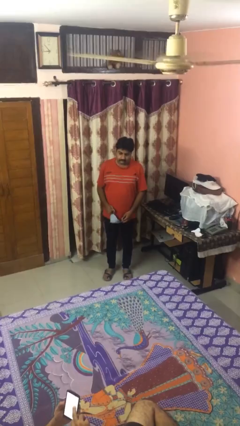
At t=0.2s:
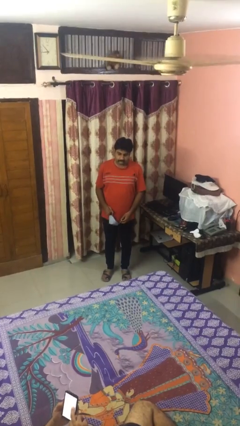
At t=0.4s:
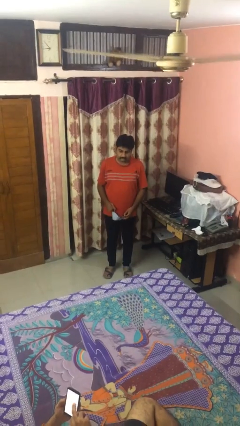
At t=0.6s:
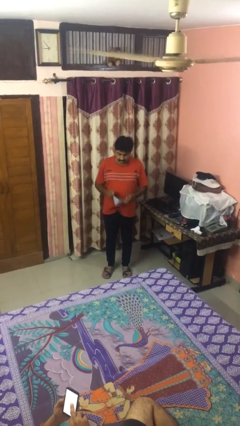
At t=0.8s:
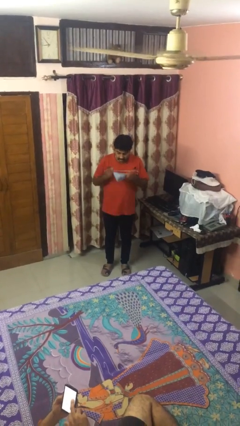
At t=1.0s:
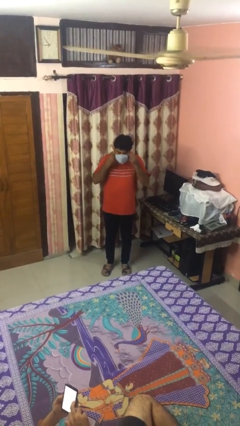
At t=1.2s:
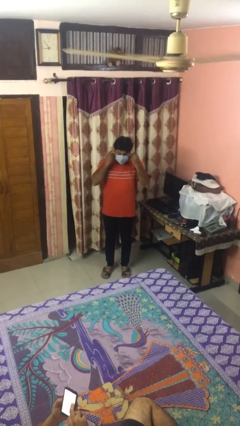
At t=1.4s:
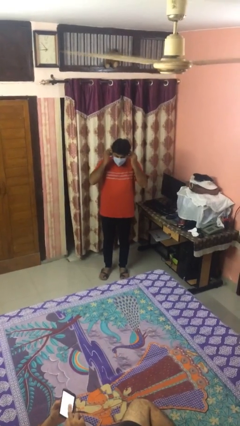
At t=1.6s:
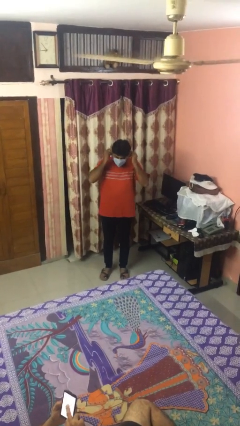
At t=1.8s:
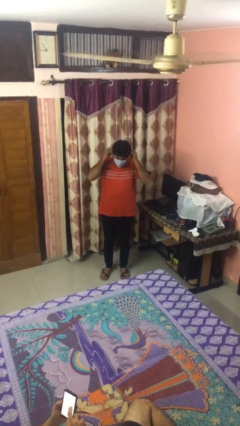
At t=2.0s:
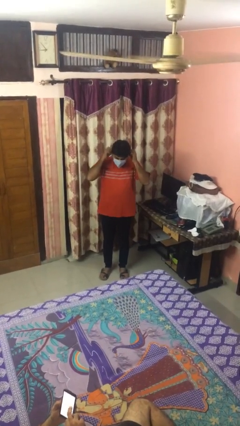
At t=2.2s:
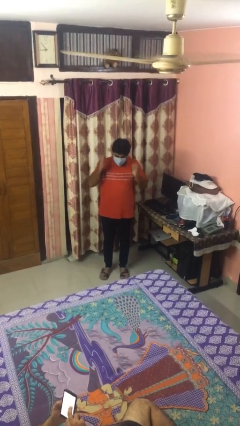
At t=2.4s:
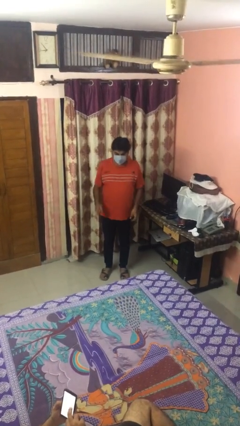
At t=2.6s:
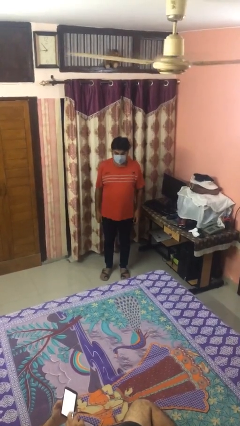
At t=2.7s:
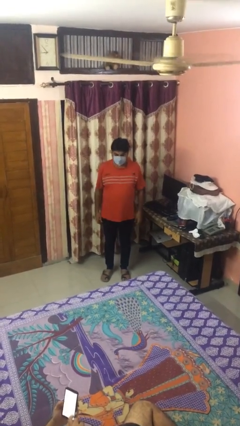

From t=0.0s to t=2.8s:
person puts on facemask

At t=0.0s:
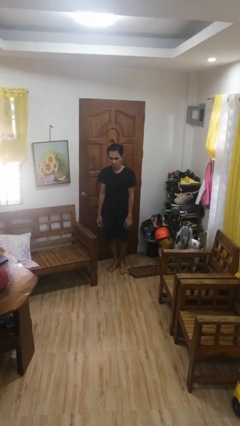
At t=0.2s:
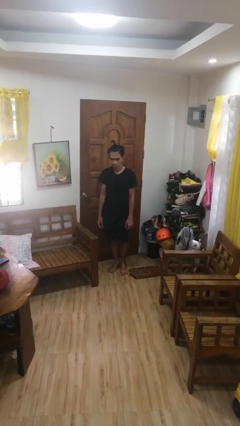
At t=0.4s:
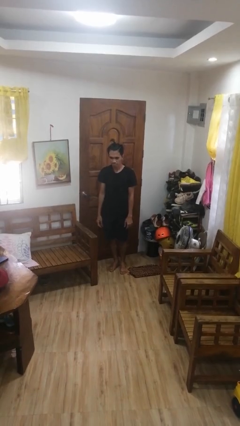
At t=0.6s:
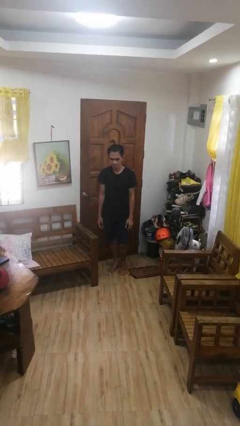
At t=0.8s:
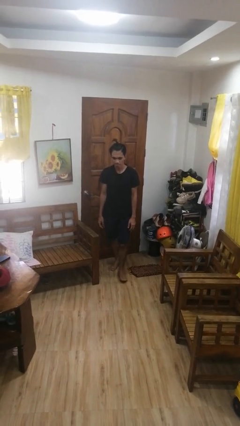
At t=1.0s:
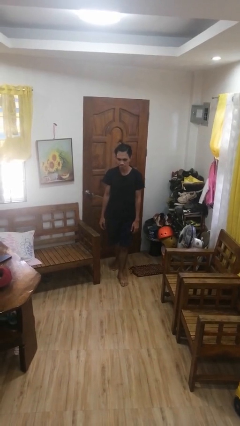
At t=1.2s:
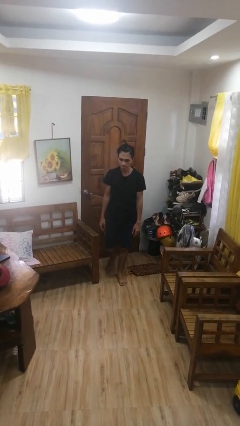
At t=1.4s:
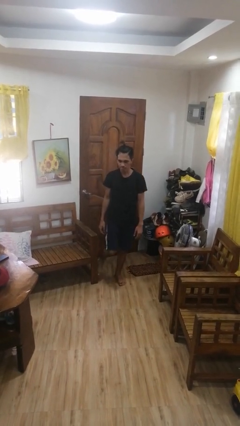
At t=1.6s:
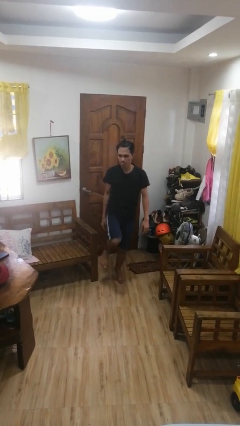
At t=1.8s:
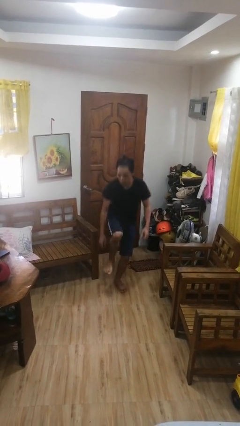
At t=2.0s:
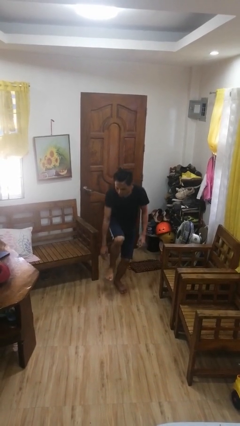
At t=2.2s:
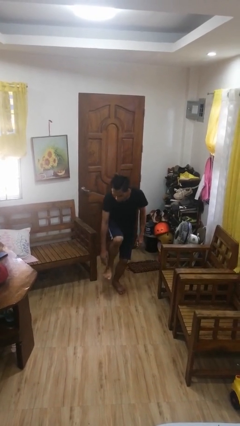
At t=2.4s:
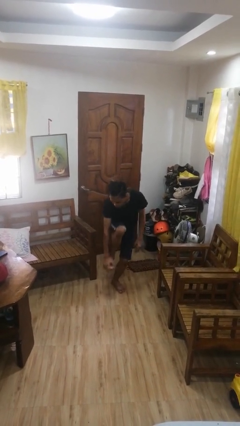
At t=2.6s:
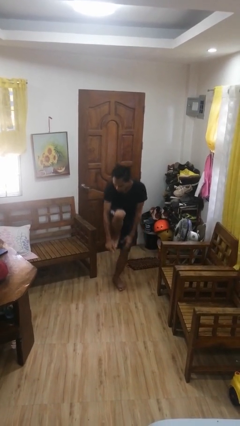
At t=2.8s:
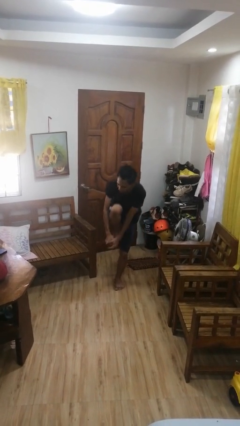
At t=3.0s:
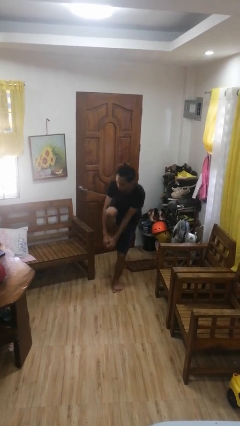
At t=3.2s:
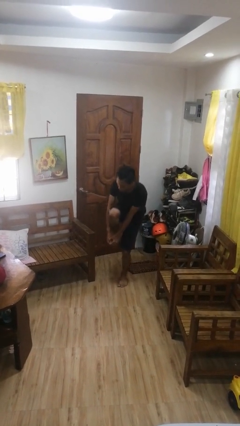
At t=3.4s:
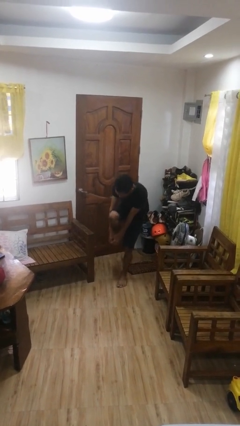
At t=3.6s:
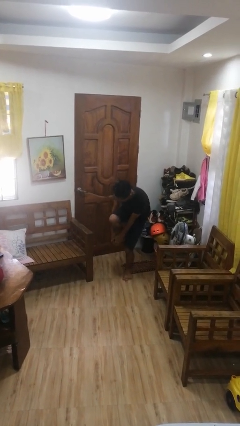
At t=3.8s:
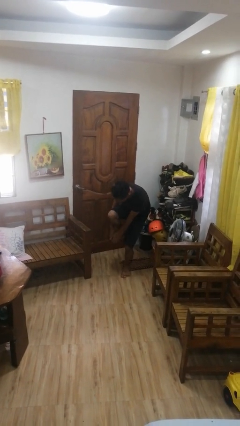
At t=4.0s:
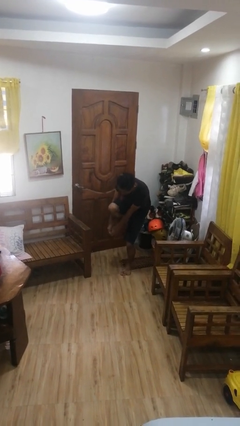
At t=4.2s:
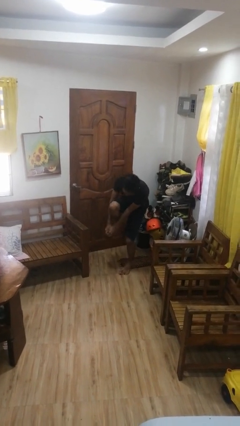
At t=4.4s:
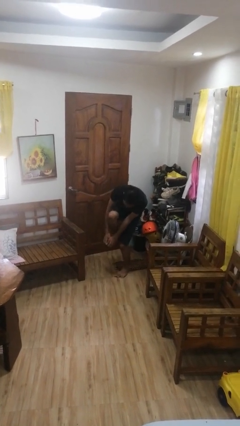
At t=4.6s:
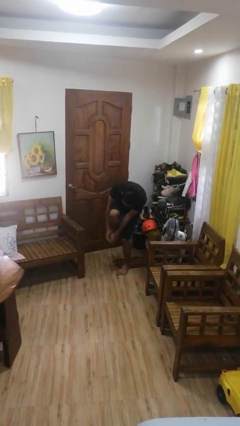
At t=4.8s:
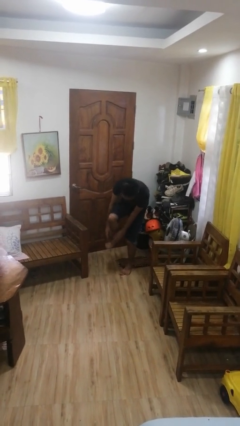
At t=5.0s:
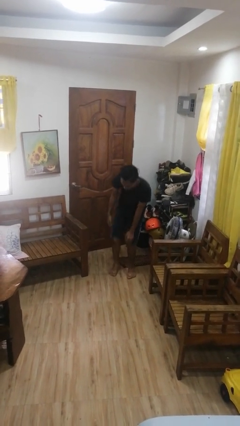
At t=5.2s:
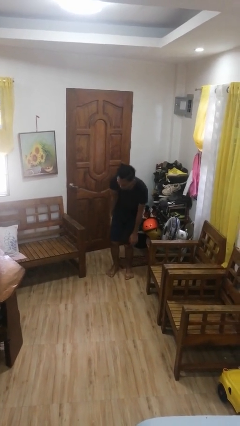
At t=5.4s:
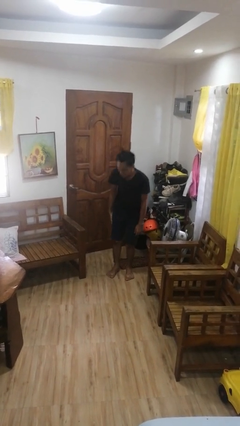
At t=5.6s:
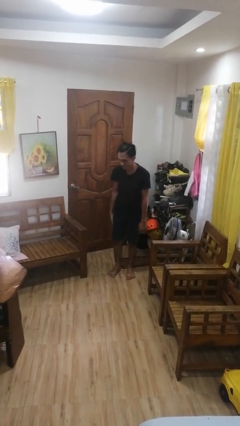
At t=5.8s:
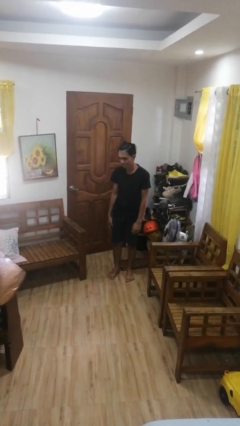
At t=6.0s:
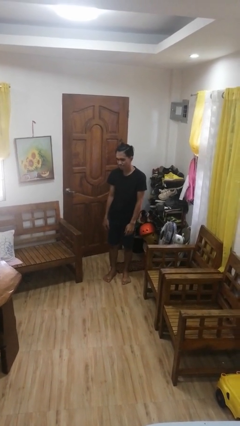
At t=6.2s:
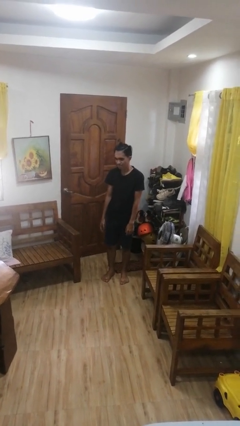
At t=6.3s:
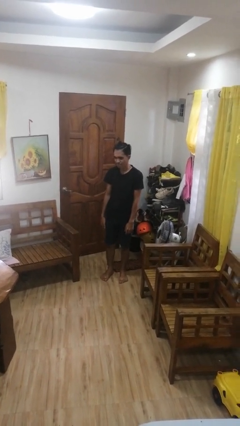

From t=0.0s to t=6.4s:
person stubs toe

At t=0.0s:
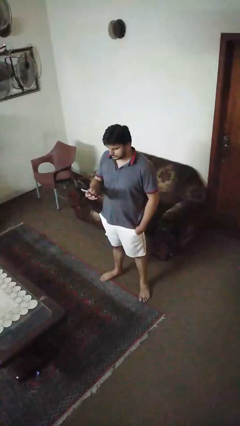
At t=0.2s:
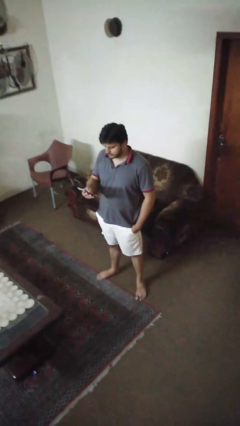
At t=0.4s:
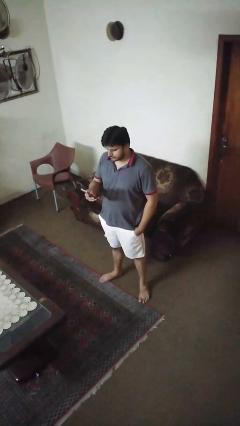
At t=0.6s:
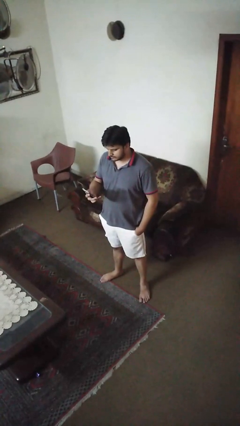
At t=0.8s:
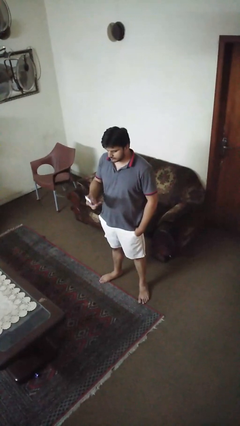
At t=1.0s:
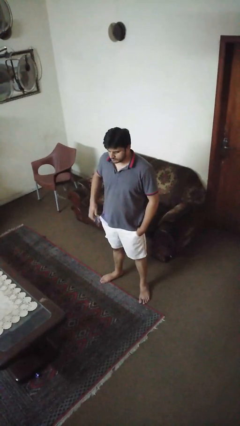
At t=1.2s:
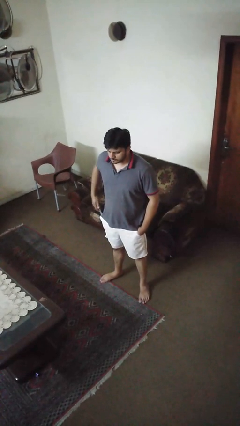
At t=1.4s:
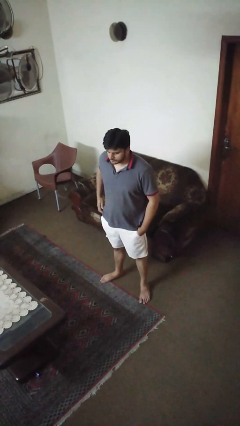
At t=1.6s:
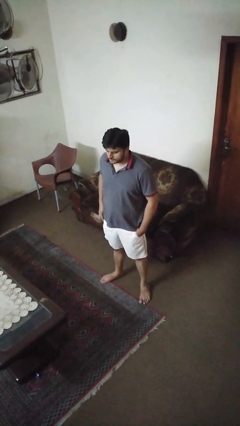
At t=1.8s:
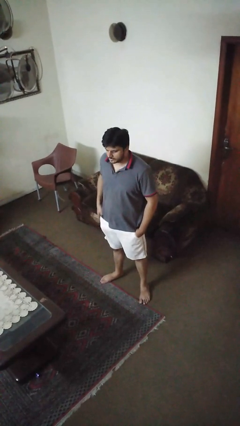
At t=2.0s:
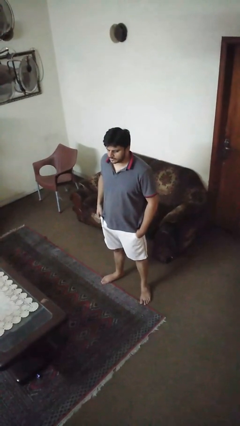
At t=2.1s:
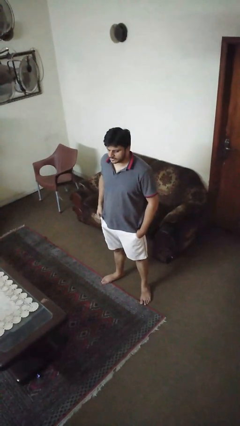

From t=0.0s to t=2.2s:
person puts phone into pocket

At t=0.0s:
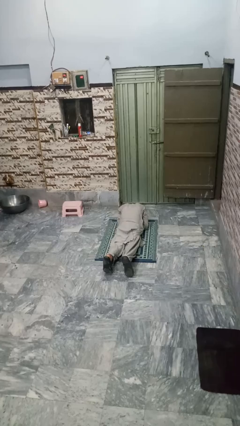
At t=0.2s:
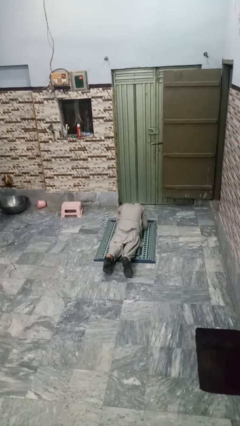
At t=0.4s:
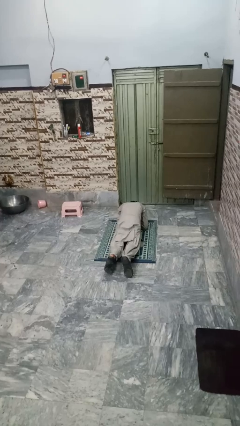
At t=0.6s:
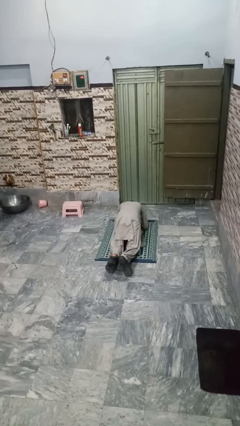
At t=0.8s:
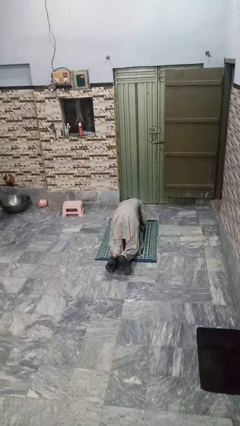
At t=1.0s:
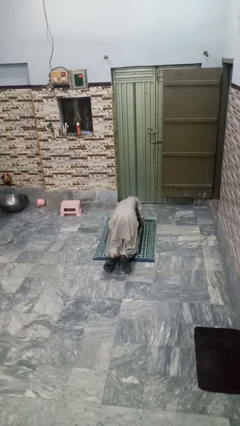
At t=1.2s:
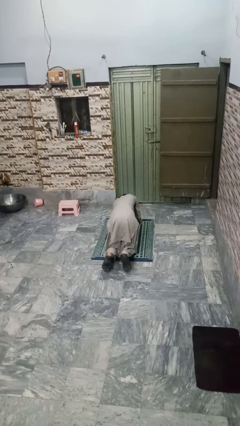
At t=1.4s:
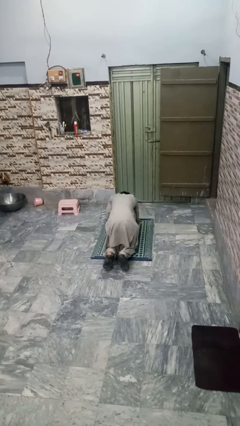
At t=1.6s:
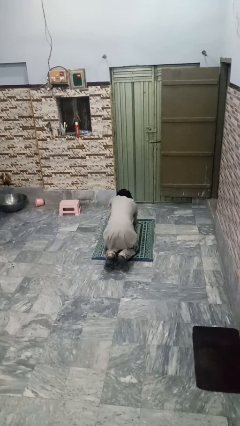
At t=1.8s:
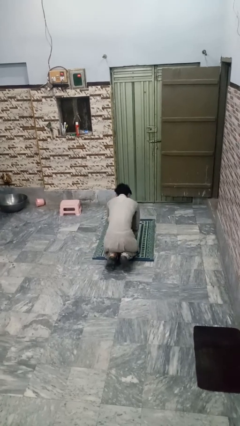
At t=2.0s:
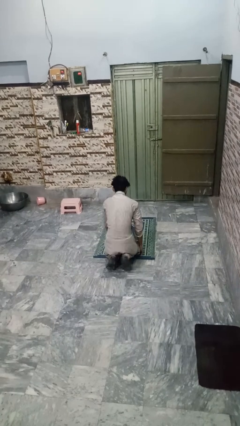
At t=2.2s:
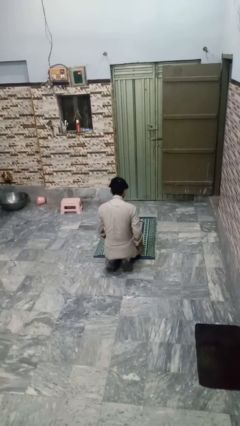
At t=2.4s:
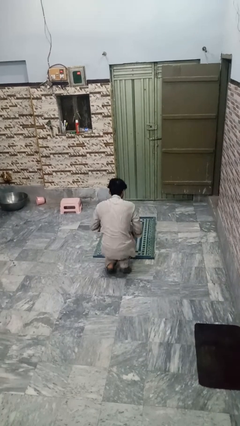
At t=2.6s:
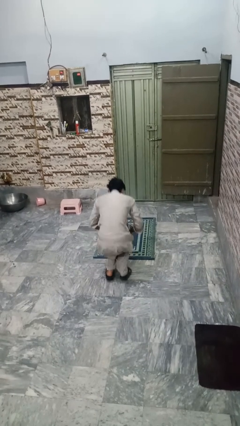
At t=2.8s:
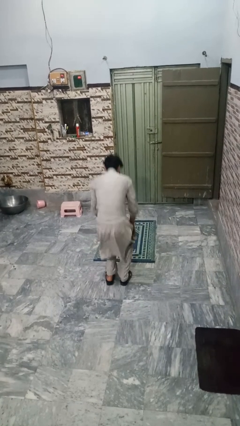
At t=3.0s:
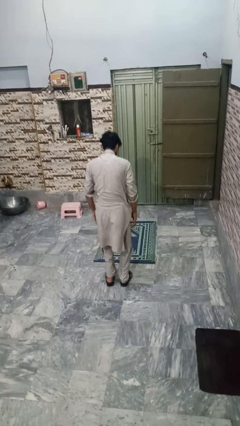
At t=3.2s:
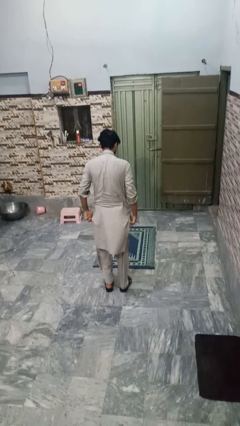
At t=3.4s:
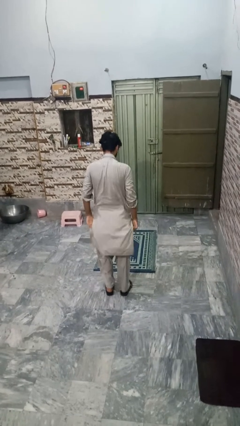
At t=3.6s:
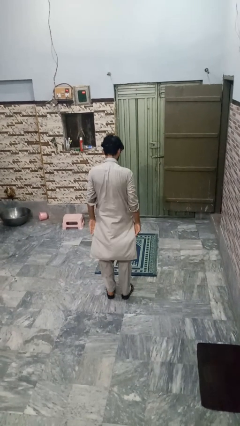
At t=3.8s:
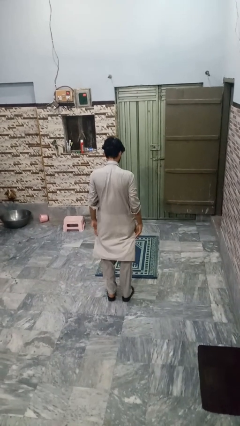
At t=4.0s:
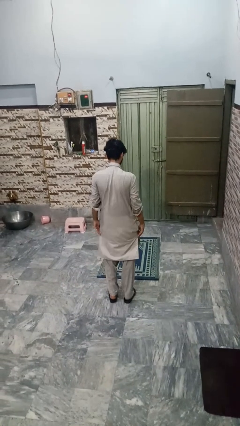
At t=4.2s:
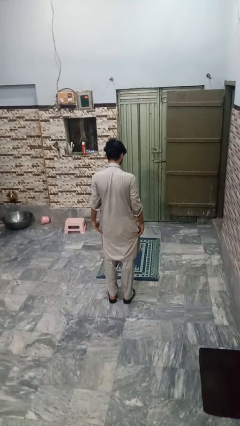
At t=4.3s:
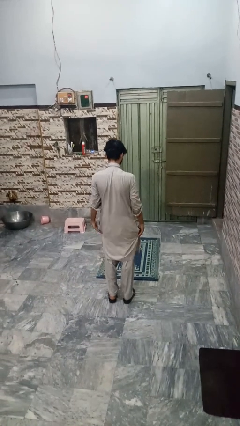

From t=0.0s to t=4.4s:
person stands up from floor

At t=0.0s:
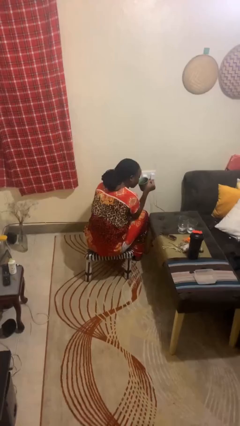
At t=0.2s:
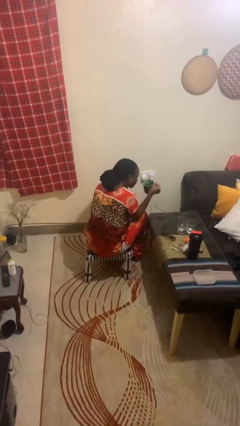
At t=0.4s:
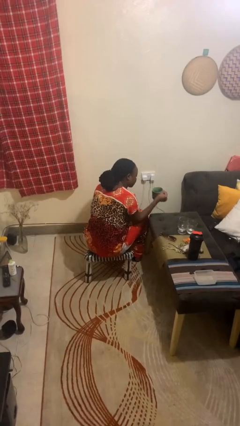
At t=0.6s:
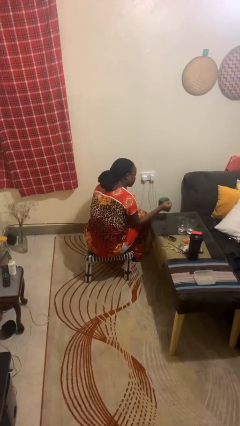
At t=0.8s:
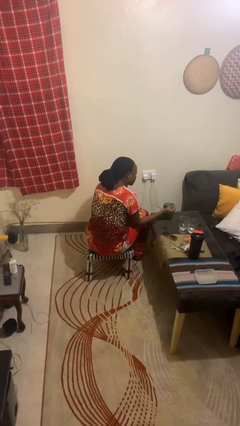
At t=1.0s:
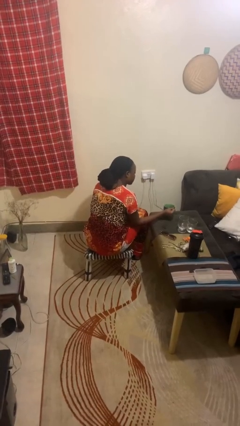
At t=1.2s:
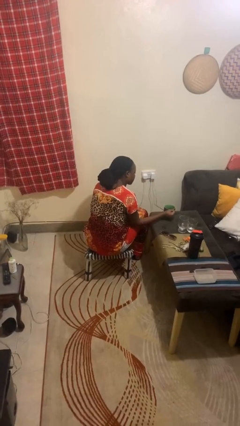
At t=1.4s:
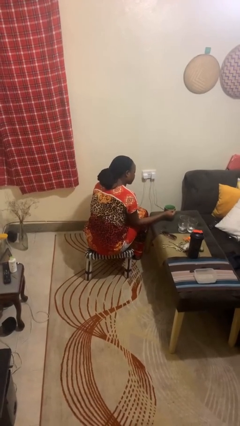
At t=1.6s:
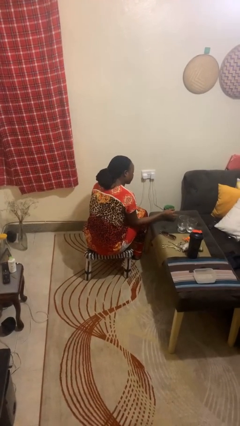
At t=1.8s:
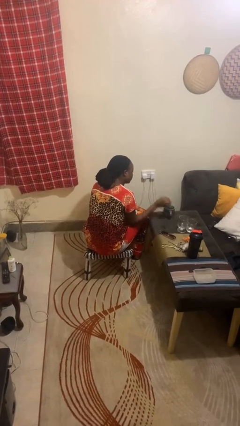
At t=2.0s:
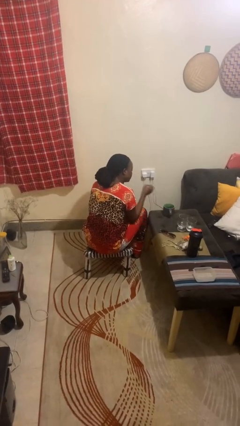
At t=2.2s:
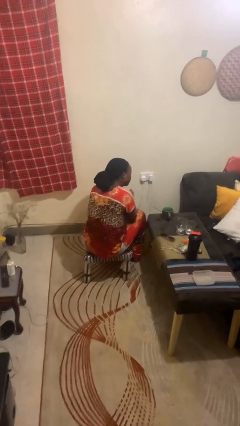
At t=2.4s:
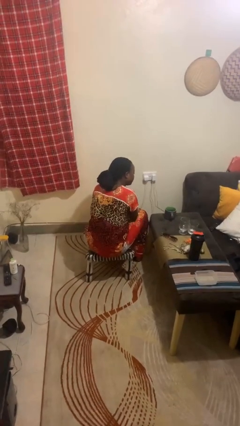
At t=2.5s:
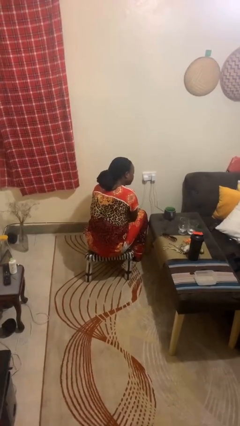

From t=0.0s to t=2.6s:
person puts down object on table
